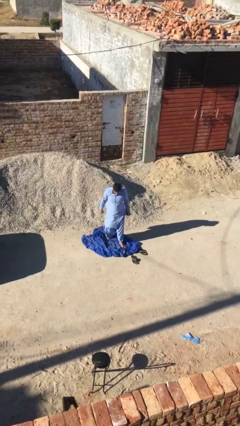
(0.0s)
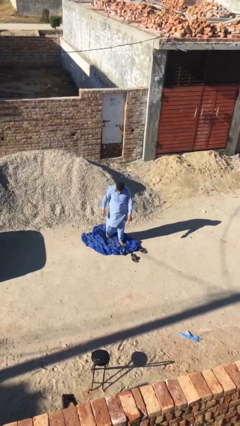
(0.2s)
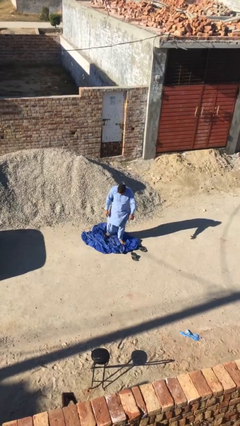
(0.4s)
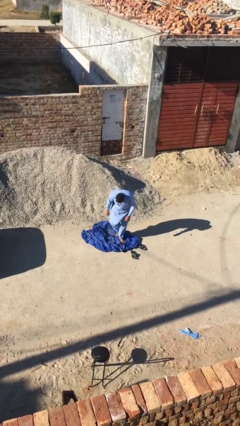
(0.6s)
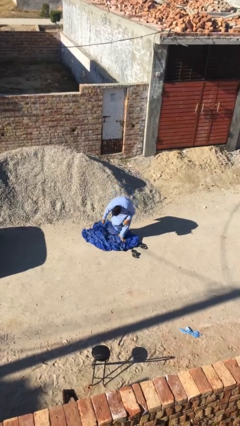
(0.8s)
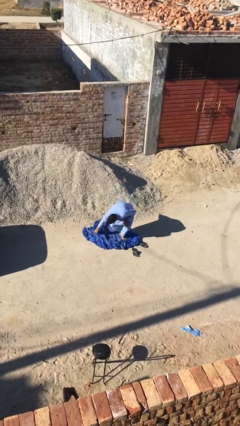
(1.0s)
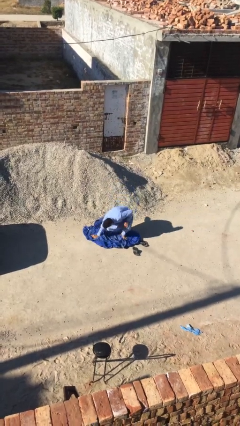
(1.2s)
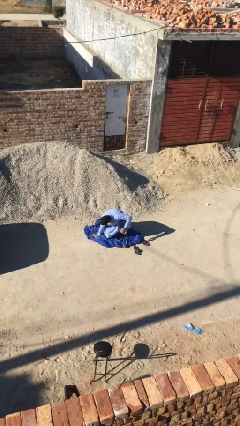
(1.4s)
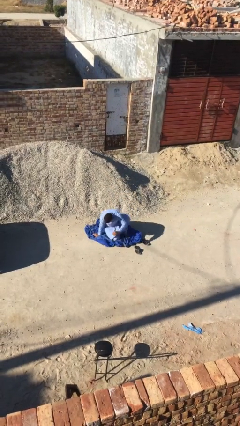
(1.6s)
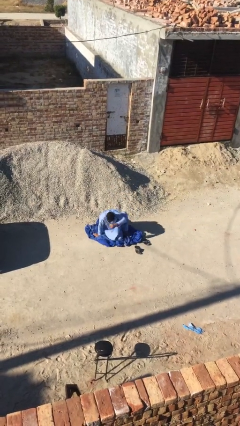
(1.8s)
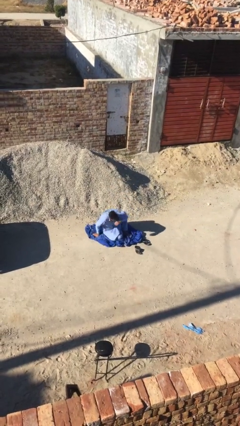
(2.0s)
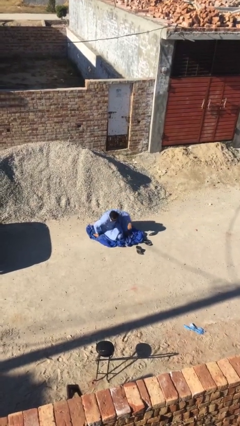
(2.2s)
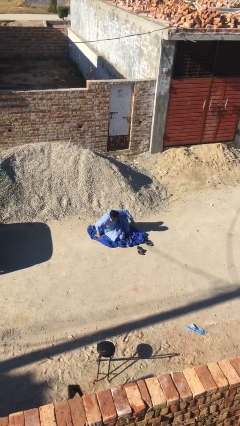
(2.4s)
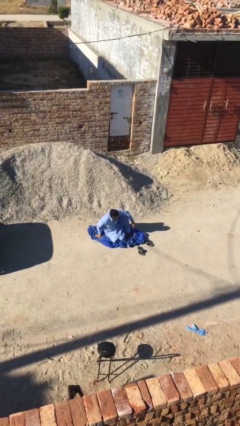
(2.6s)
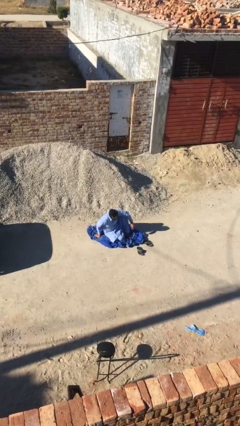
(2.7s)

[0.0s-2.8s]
person sits down

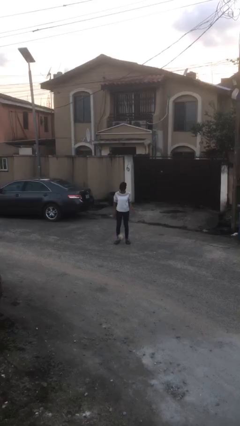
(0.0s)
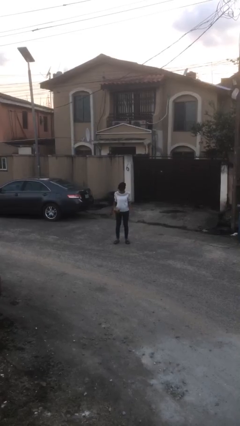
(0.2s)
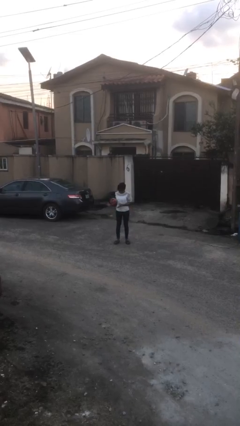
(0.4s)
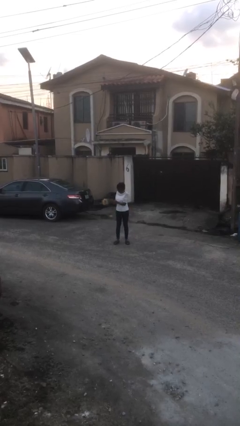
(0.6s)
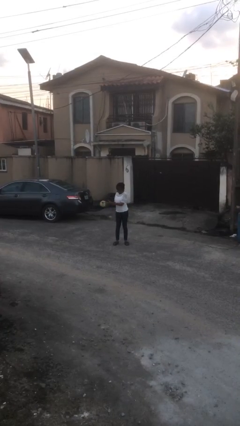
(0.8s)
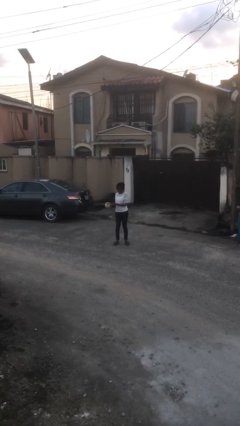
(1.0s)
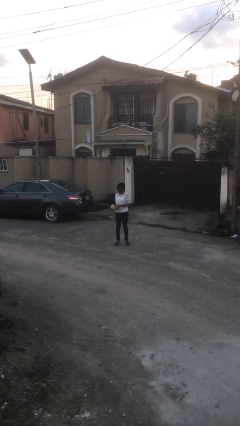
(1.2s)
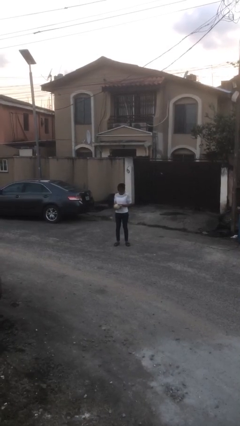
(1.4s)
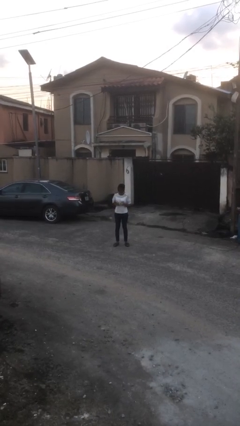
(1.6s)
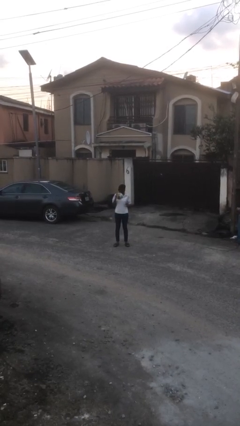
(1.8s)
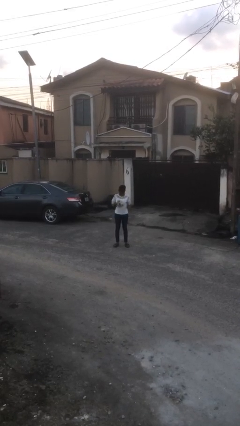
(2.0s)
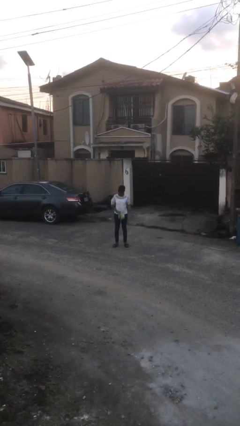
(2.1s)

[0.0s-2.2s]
person bounces ball on floor

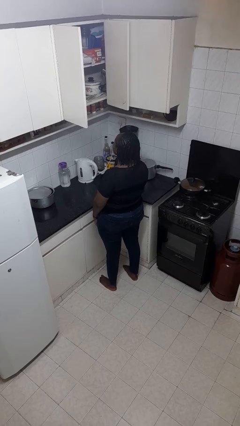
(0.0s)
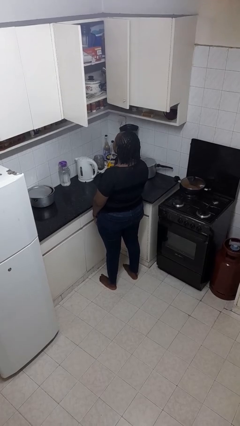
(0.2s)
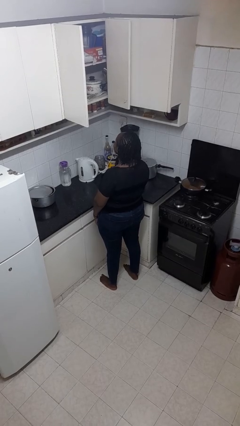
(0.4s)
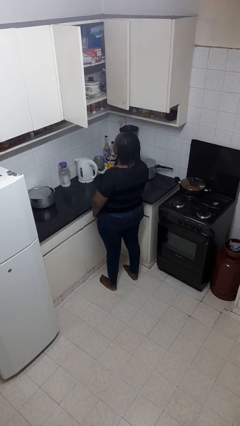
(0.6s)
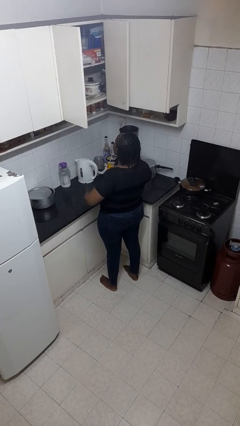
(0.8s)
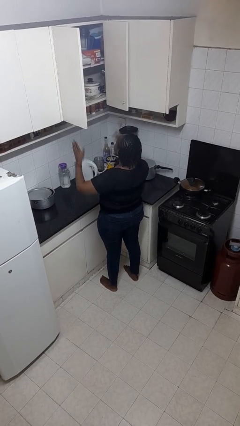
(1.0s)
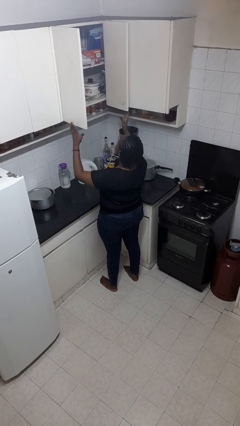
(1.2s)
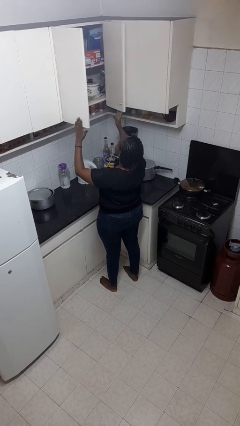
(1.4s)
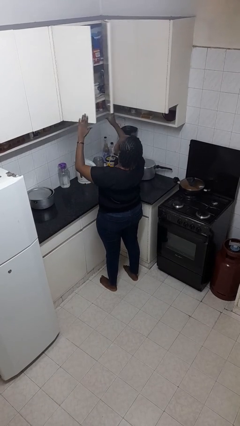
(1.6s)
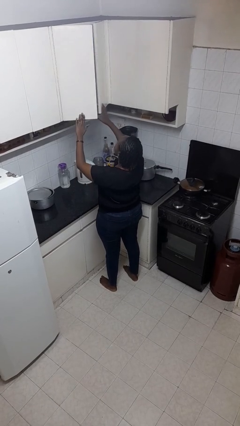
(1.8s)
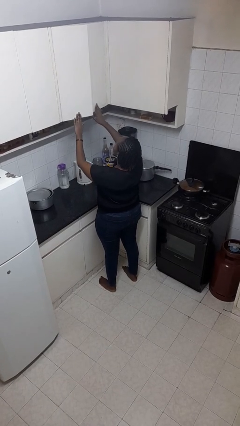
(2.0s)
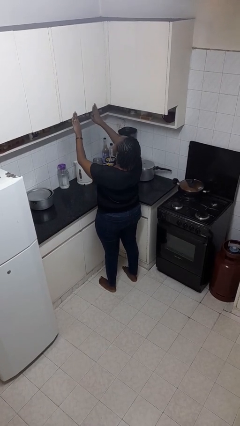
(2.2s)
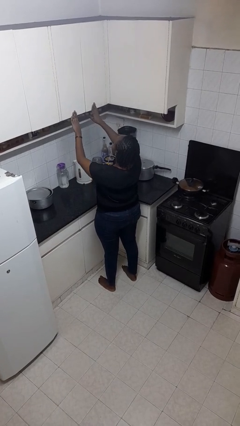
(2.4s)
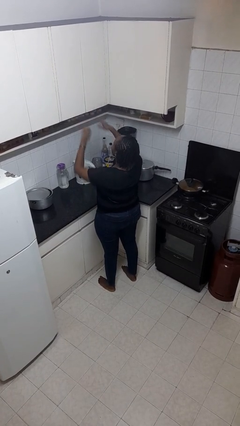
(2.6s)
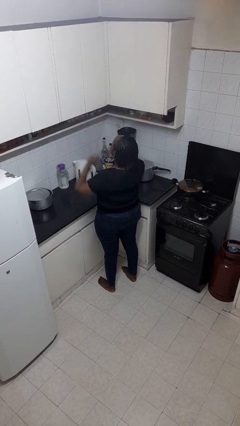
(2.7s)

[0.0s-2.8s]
person closes cabinet

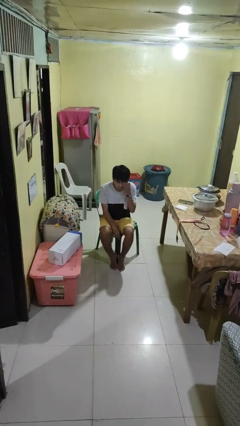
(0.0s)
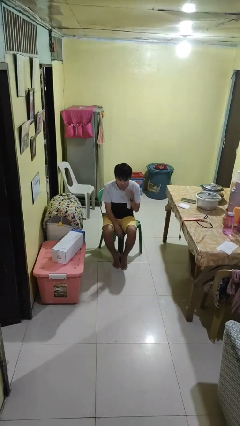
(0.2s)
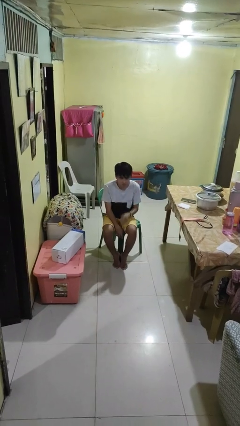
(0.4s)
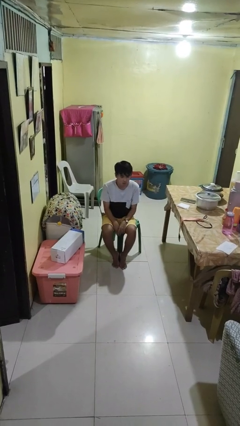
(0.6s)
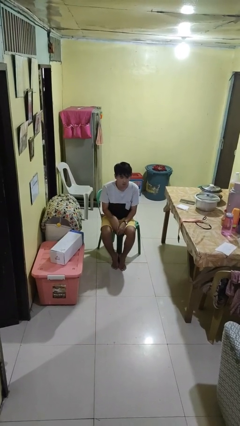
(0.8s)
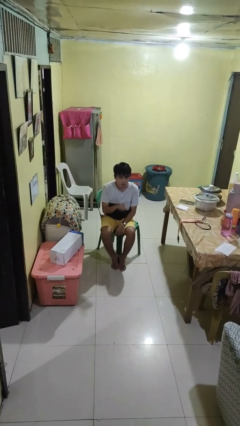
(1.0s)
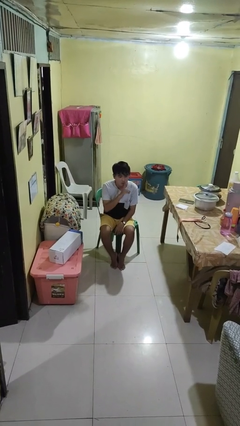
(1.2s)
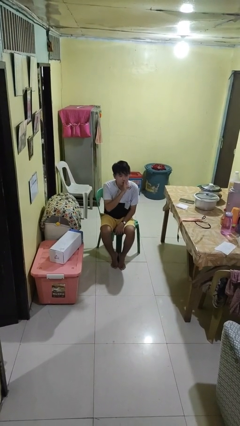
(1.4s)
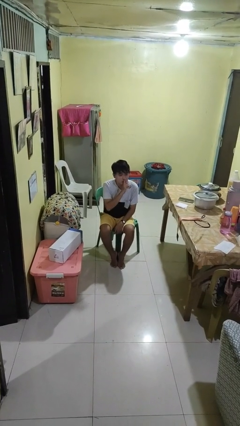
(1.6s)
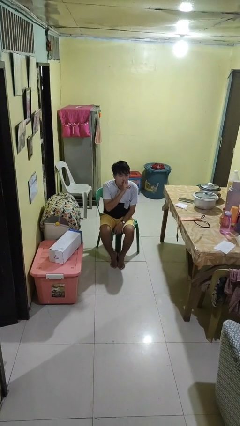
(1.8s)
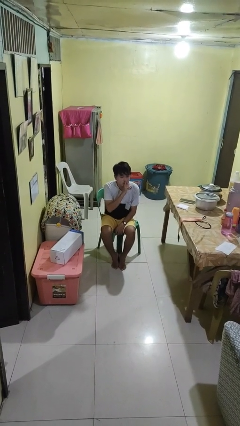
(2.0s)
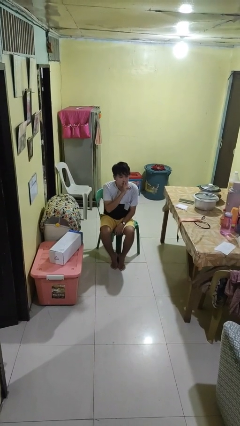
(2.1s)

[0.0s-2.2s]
person gestures be quiet

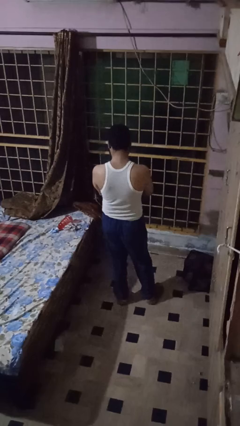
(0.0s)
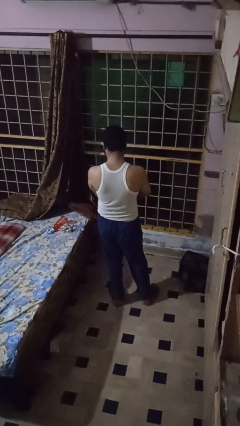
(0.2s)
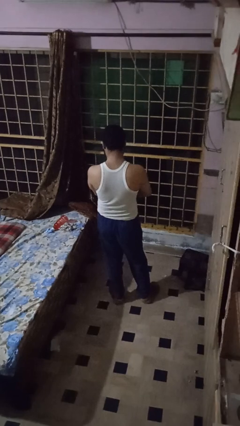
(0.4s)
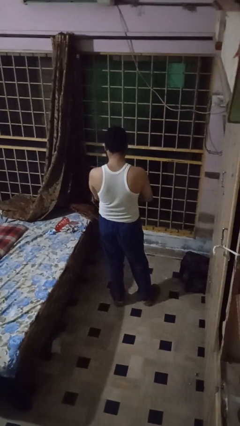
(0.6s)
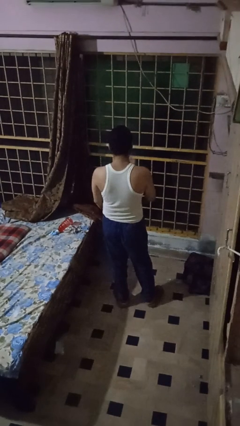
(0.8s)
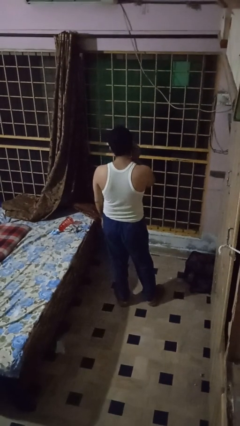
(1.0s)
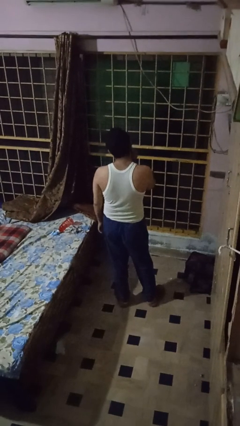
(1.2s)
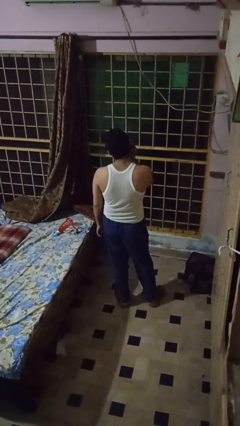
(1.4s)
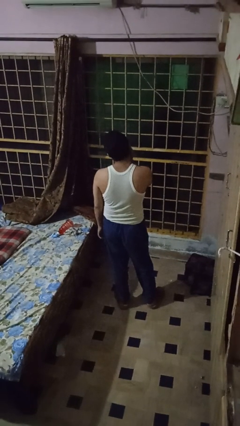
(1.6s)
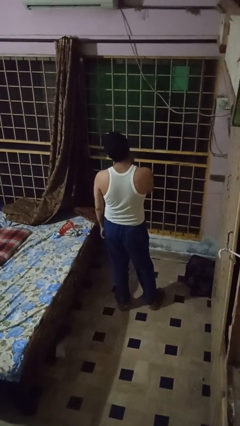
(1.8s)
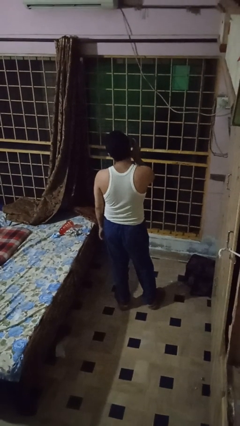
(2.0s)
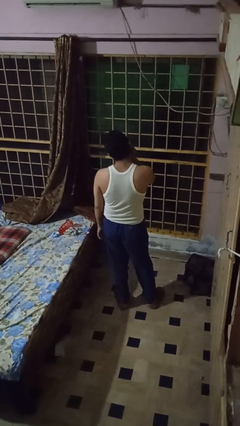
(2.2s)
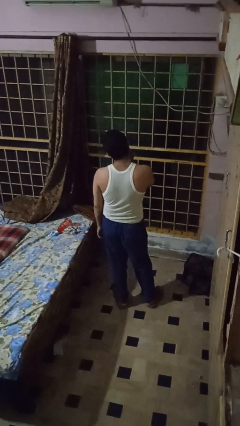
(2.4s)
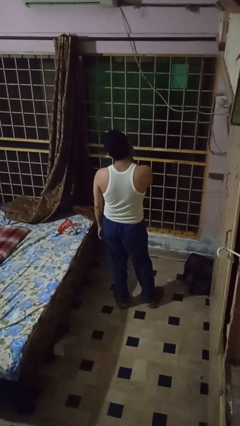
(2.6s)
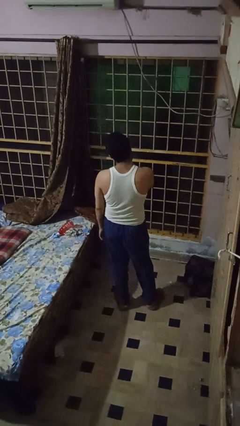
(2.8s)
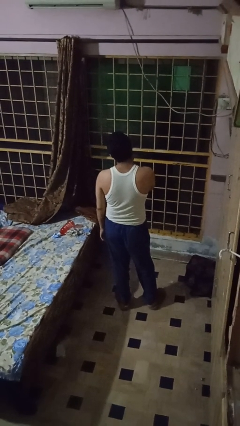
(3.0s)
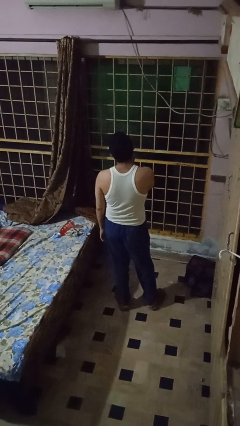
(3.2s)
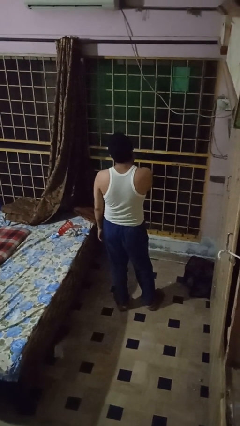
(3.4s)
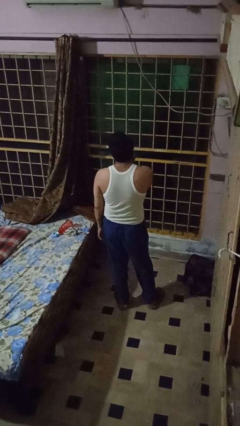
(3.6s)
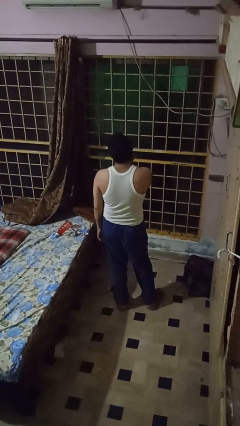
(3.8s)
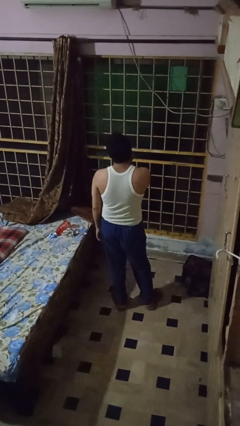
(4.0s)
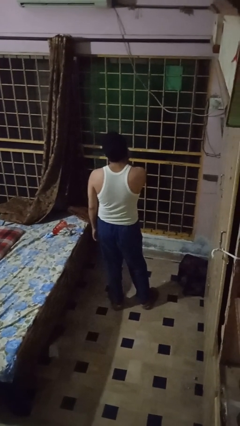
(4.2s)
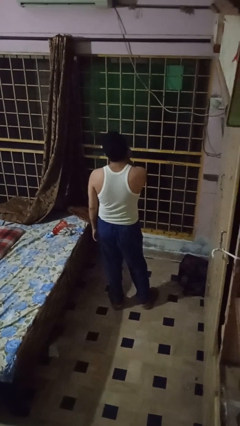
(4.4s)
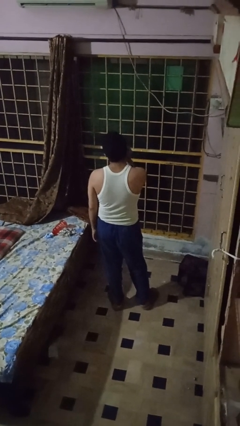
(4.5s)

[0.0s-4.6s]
person applies shaving cream

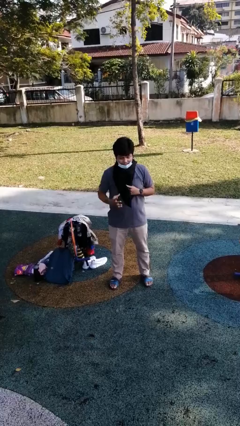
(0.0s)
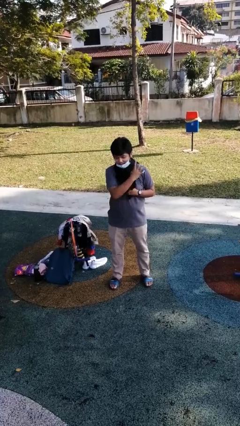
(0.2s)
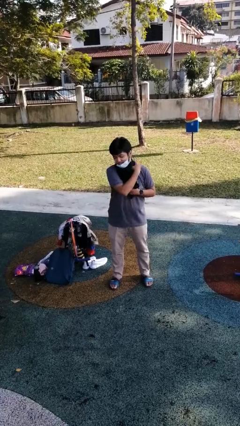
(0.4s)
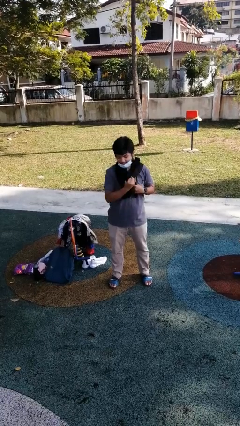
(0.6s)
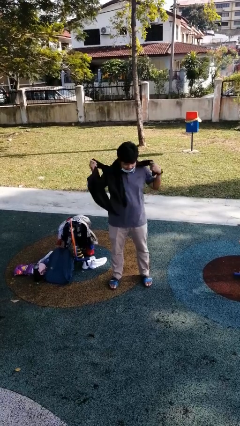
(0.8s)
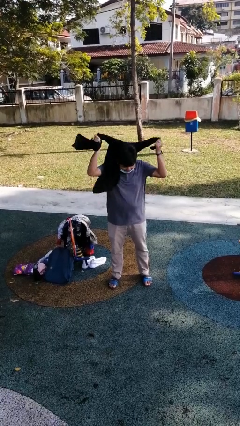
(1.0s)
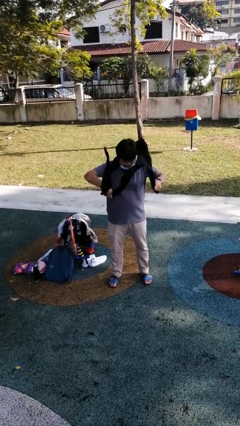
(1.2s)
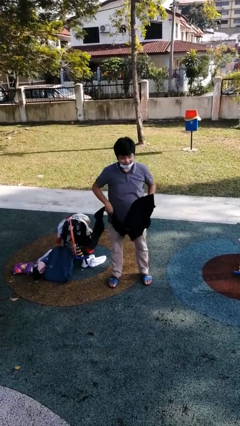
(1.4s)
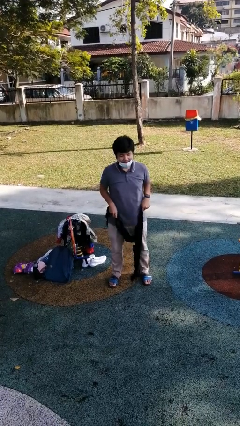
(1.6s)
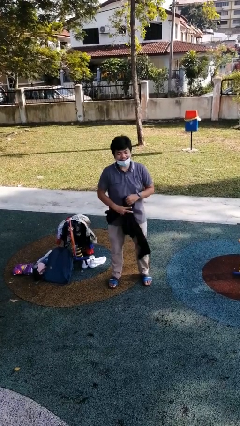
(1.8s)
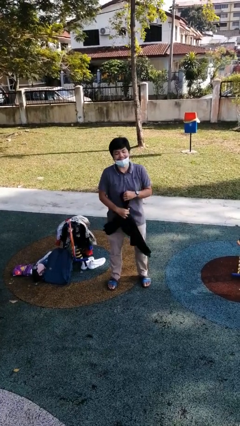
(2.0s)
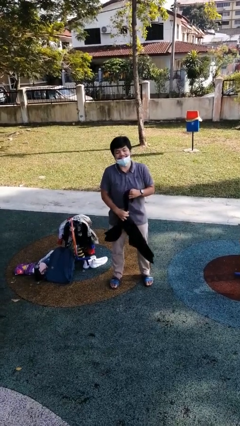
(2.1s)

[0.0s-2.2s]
person takes off scarf

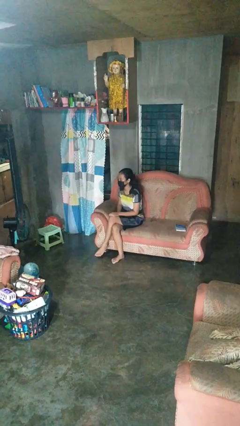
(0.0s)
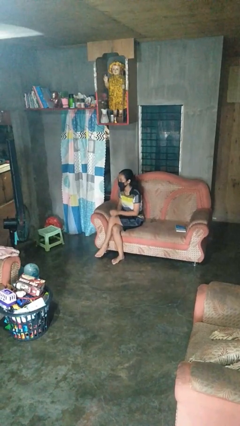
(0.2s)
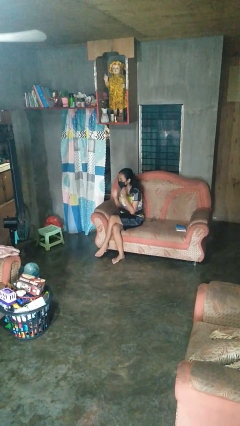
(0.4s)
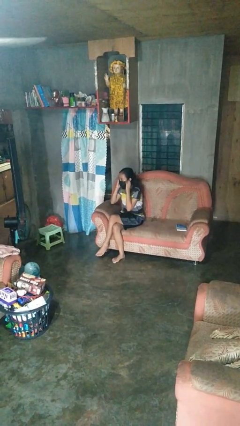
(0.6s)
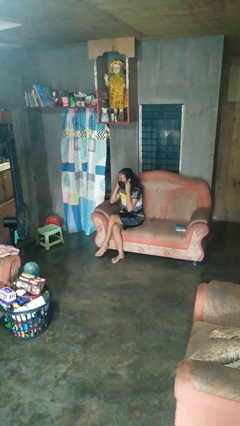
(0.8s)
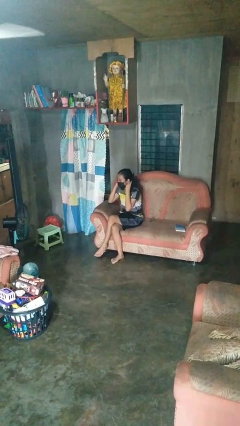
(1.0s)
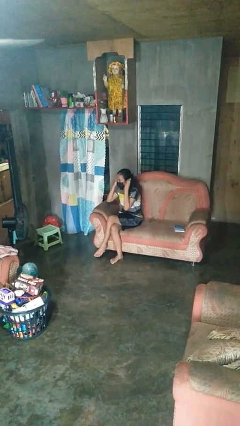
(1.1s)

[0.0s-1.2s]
person takes off facemask
